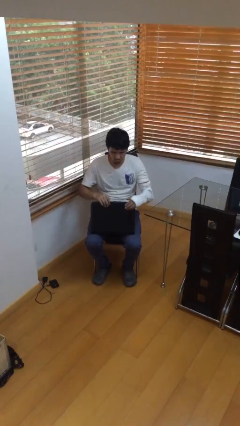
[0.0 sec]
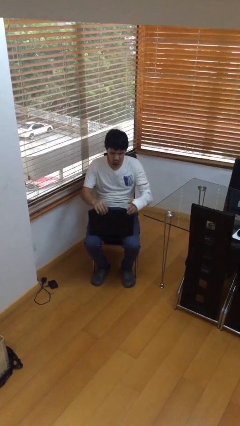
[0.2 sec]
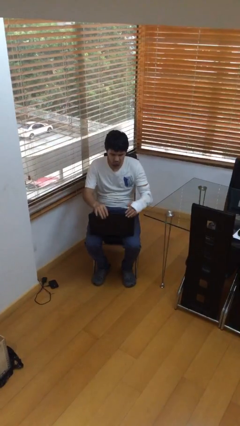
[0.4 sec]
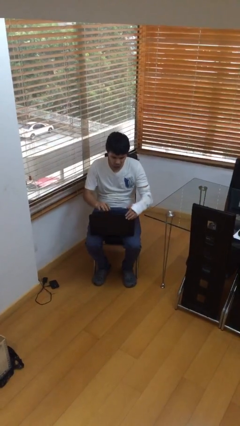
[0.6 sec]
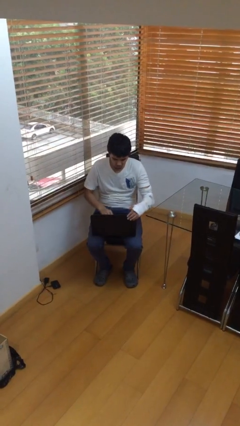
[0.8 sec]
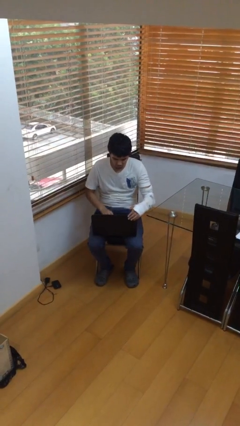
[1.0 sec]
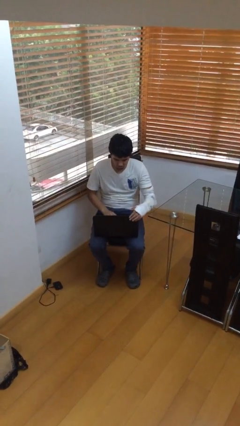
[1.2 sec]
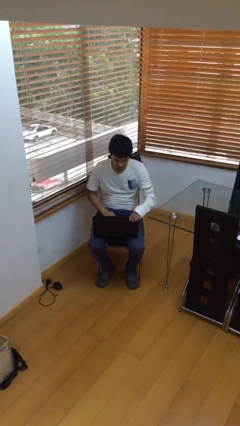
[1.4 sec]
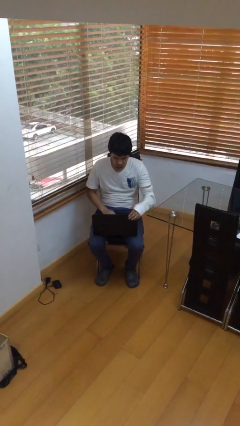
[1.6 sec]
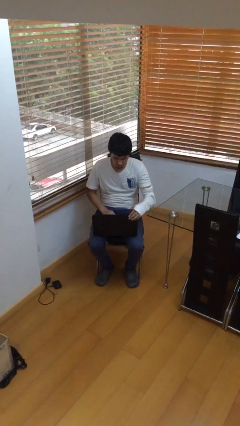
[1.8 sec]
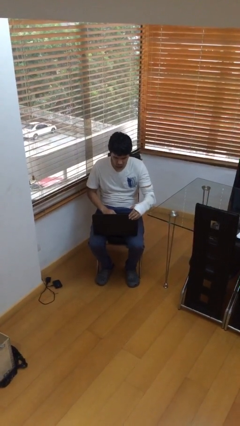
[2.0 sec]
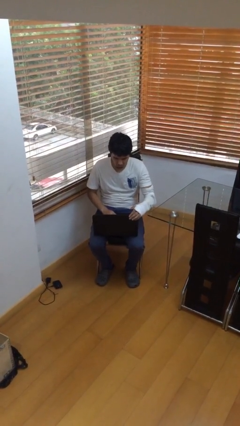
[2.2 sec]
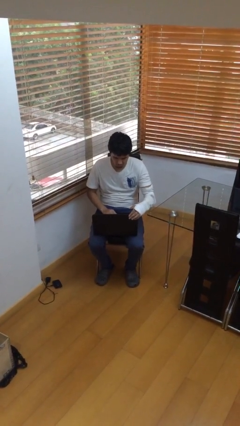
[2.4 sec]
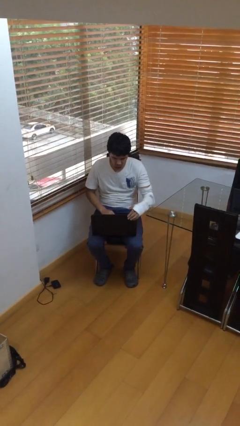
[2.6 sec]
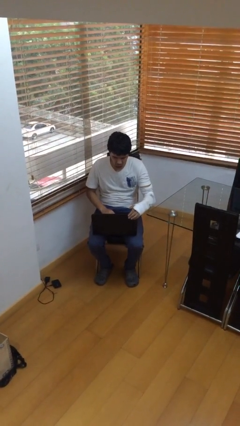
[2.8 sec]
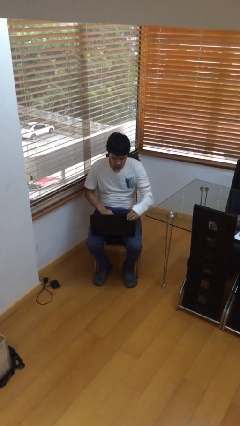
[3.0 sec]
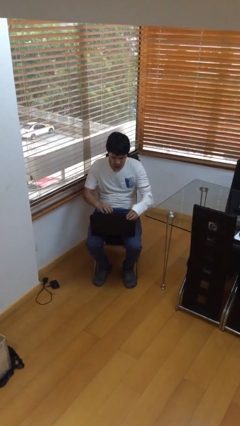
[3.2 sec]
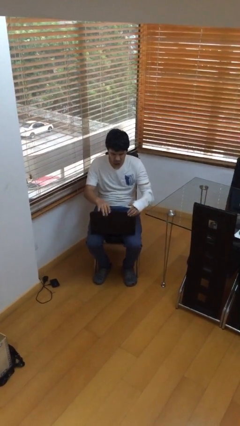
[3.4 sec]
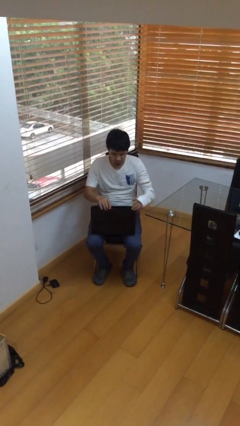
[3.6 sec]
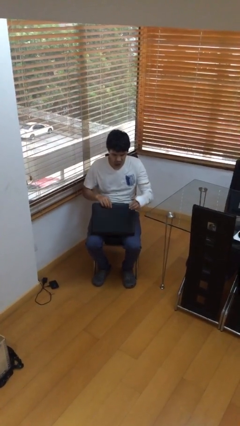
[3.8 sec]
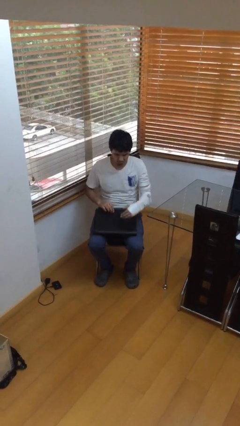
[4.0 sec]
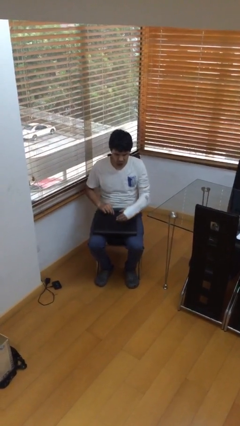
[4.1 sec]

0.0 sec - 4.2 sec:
person interacts with laptop

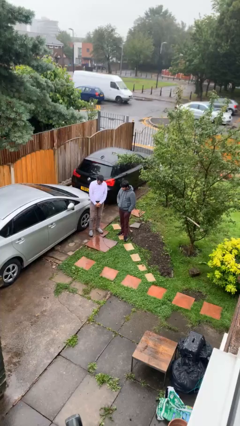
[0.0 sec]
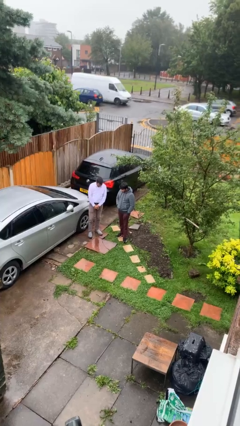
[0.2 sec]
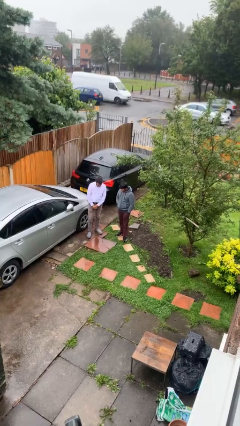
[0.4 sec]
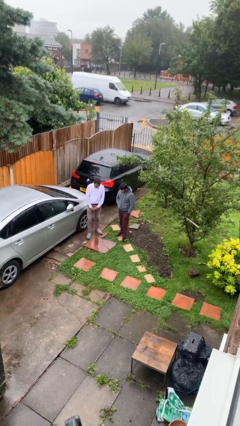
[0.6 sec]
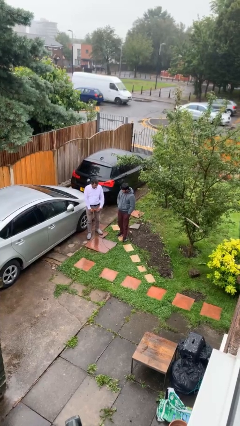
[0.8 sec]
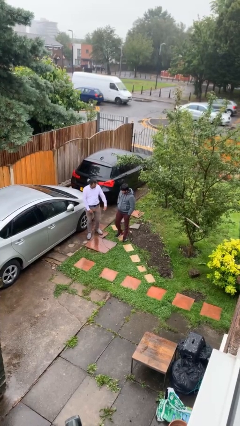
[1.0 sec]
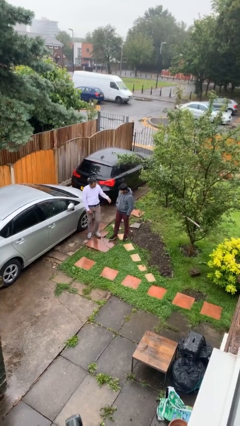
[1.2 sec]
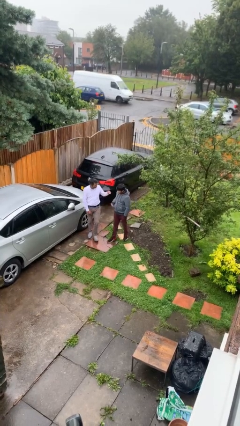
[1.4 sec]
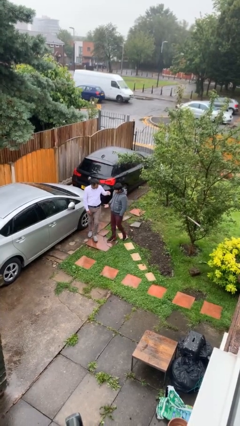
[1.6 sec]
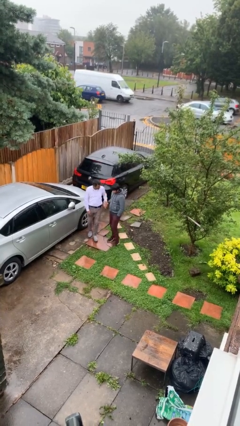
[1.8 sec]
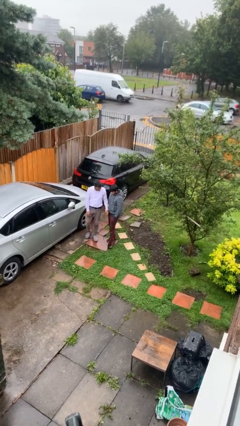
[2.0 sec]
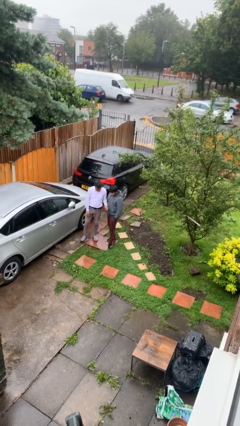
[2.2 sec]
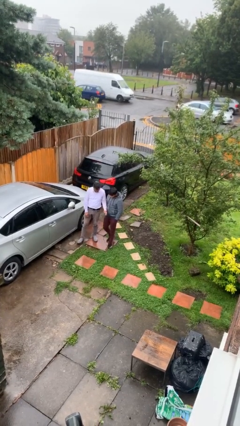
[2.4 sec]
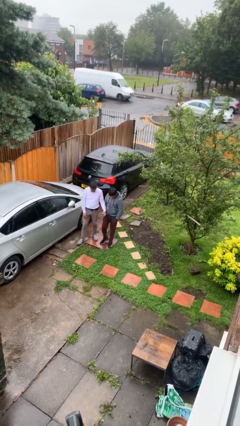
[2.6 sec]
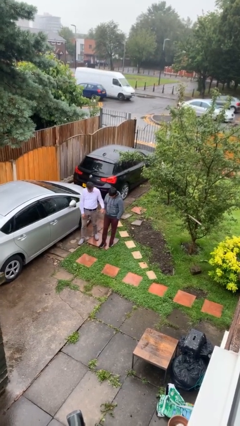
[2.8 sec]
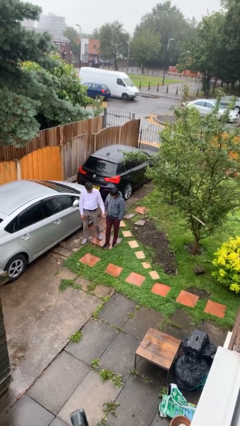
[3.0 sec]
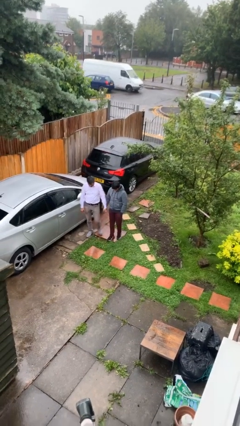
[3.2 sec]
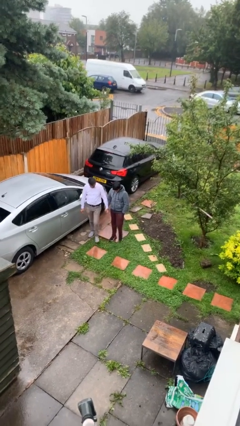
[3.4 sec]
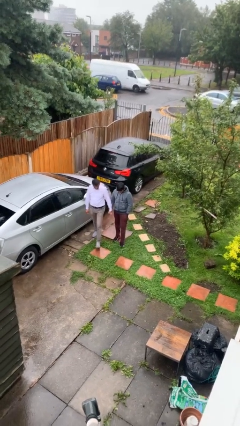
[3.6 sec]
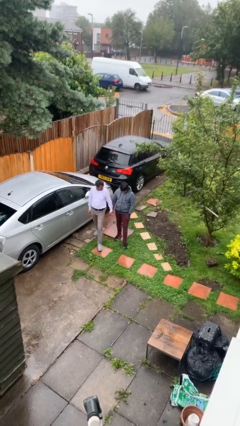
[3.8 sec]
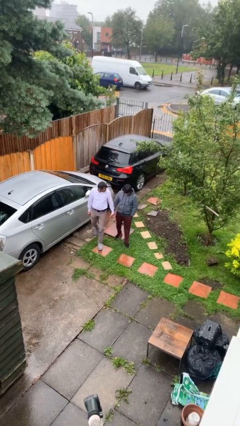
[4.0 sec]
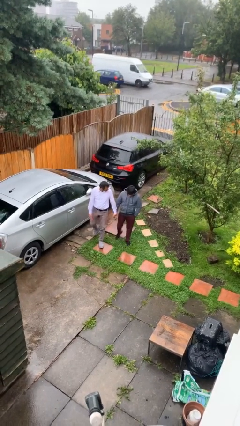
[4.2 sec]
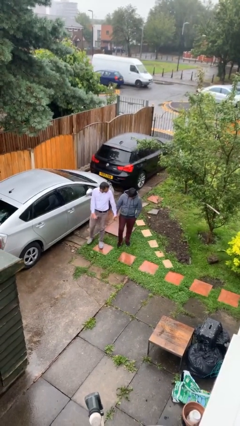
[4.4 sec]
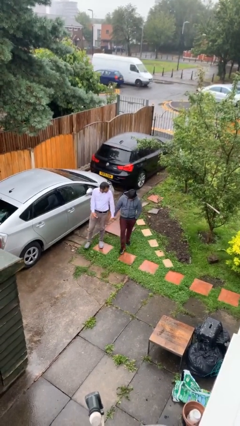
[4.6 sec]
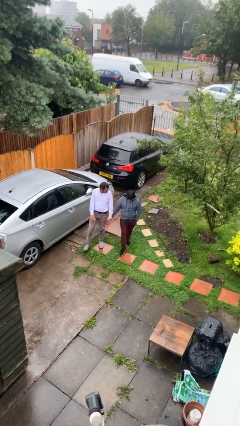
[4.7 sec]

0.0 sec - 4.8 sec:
person holds hand

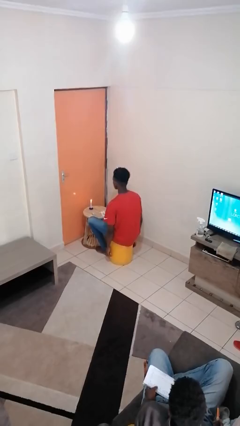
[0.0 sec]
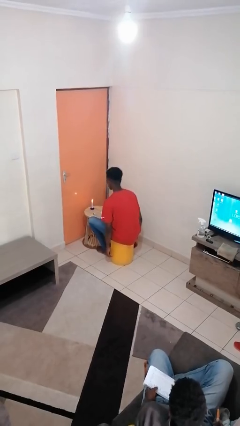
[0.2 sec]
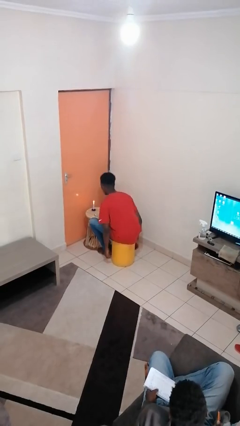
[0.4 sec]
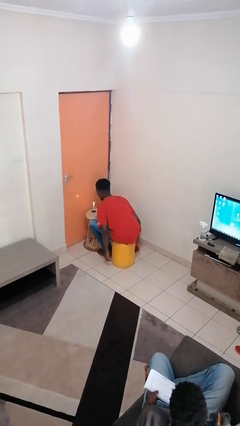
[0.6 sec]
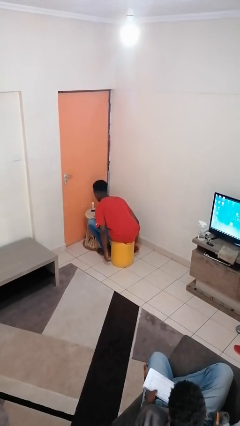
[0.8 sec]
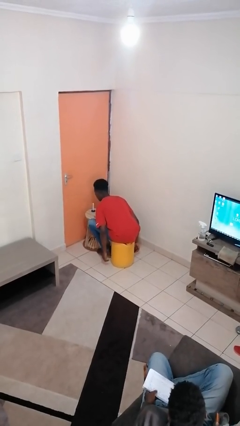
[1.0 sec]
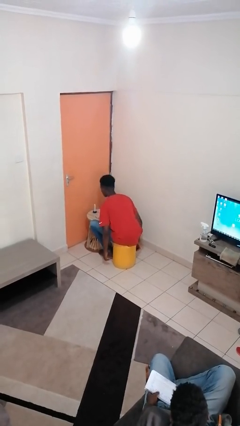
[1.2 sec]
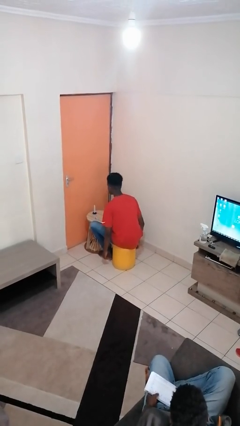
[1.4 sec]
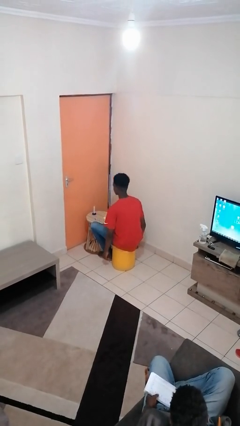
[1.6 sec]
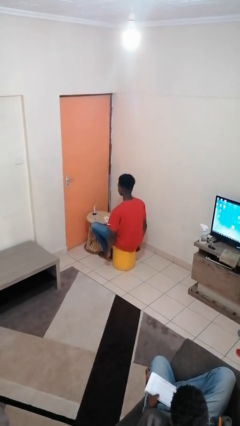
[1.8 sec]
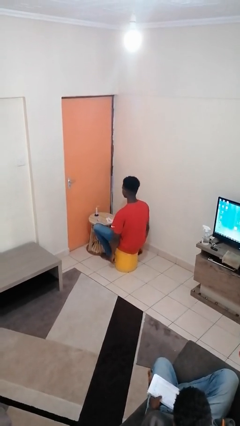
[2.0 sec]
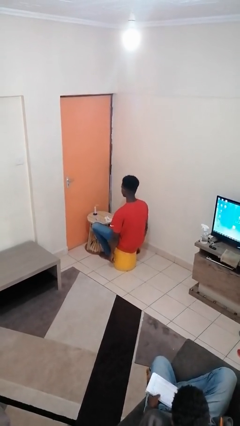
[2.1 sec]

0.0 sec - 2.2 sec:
person extinguishes candle

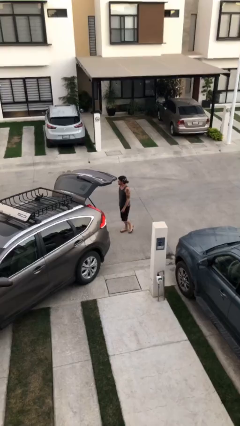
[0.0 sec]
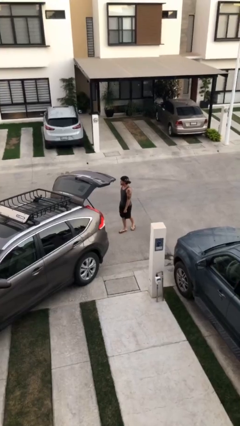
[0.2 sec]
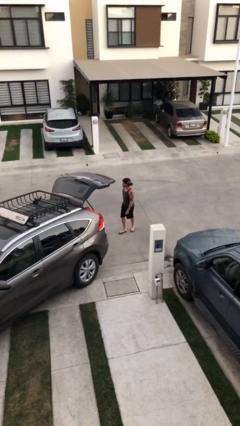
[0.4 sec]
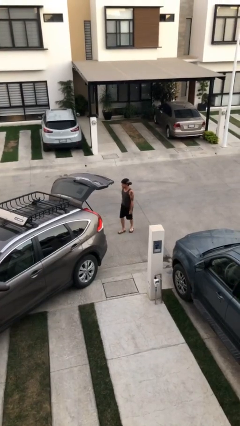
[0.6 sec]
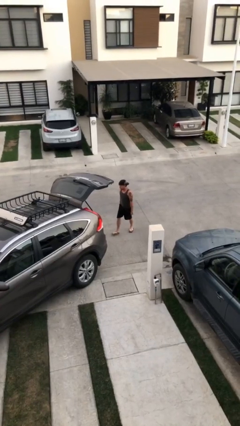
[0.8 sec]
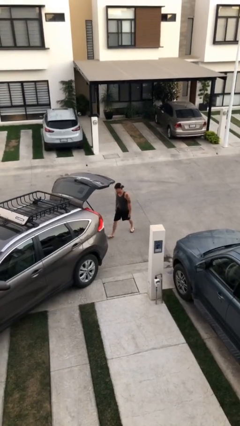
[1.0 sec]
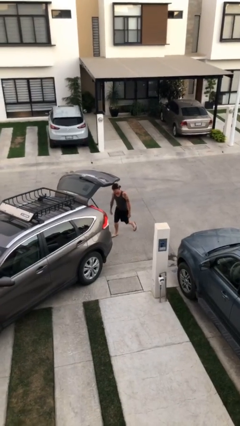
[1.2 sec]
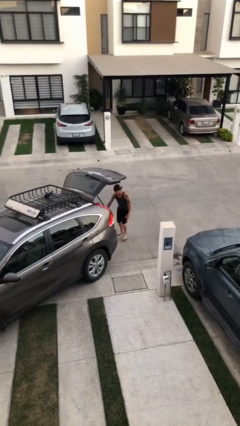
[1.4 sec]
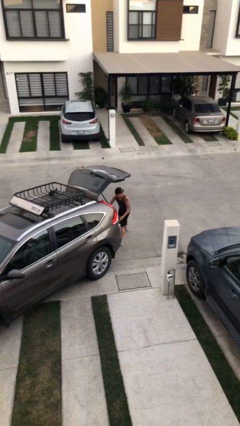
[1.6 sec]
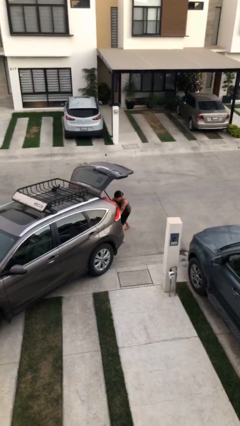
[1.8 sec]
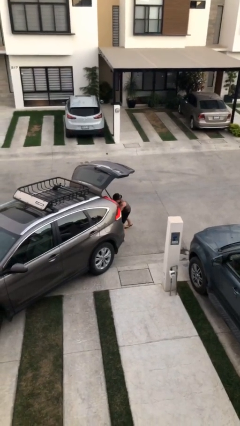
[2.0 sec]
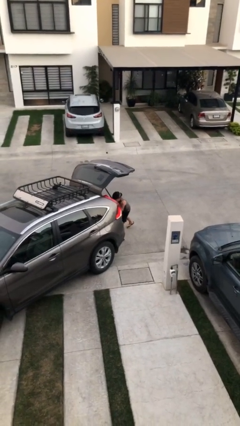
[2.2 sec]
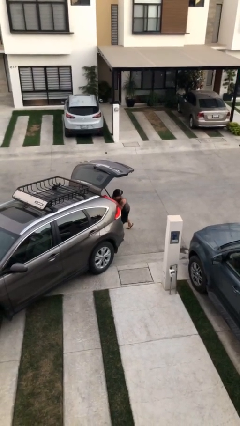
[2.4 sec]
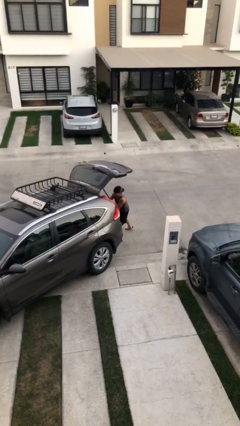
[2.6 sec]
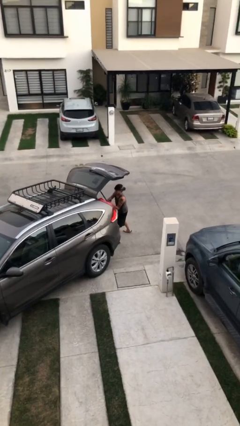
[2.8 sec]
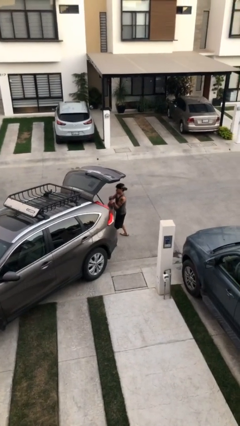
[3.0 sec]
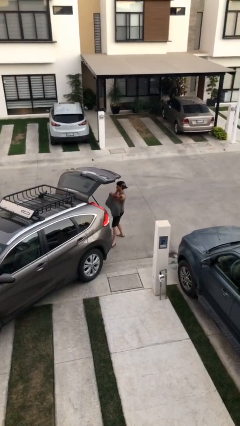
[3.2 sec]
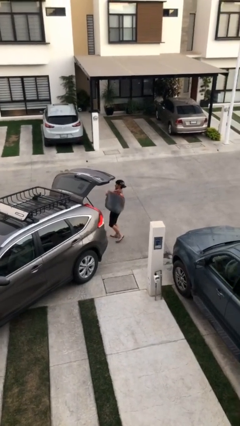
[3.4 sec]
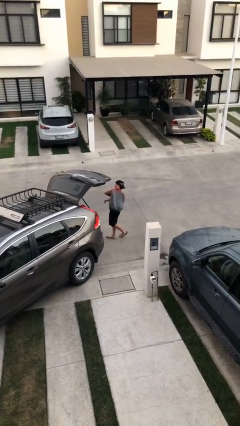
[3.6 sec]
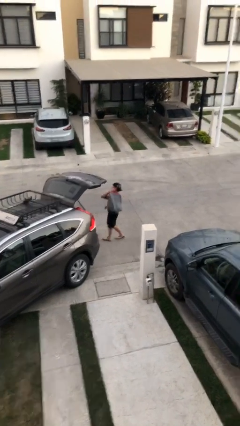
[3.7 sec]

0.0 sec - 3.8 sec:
person unloads car

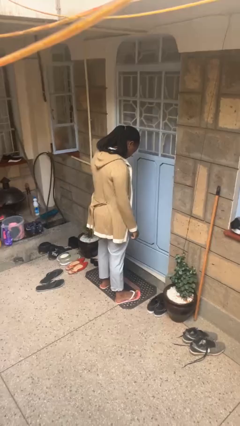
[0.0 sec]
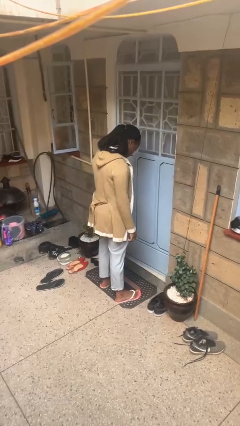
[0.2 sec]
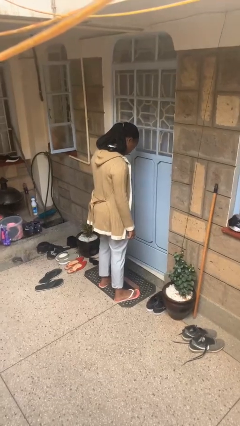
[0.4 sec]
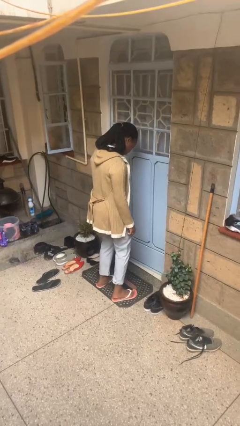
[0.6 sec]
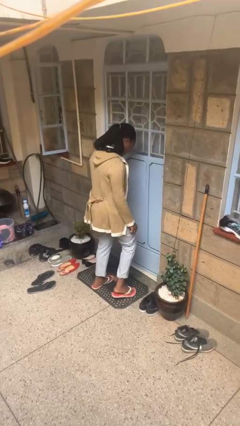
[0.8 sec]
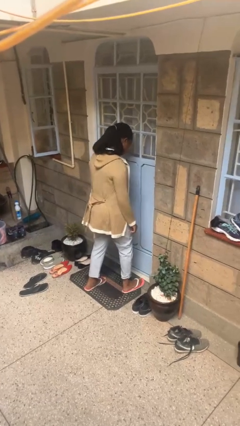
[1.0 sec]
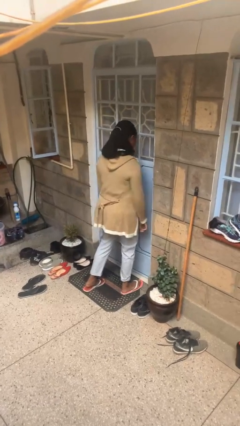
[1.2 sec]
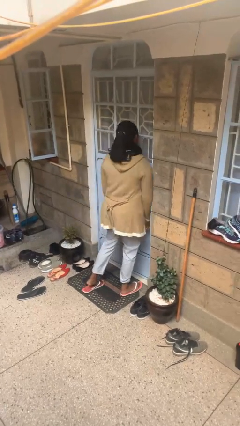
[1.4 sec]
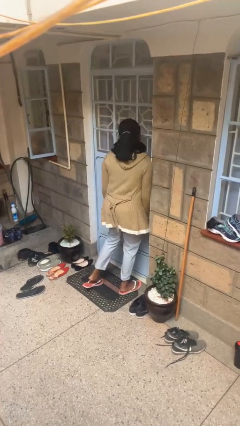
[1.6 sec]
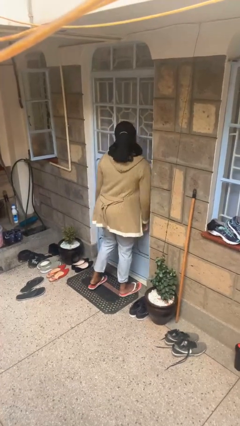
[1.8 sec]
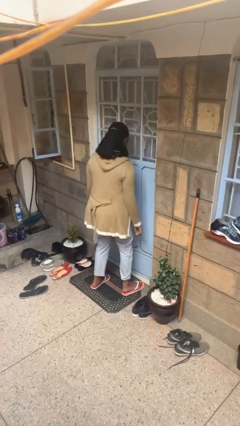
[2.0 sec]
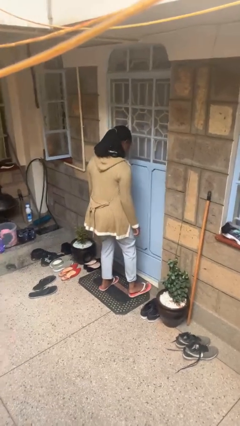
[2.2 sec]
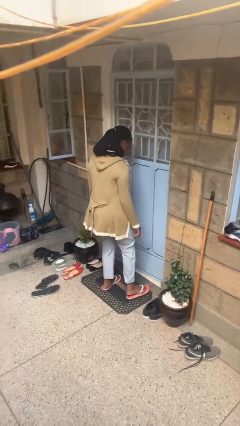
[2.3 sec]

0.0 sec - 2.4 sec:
person bumps into wall
